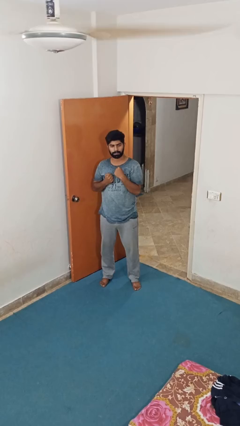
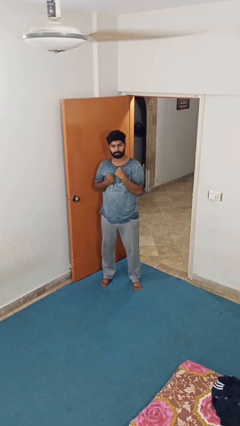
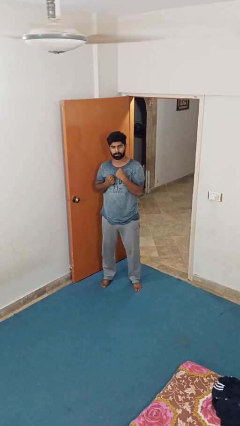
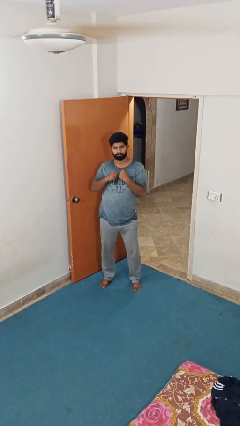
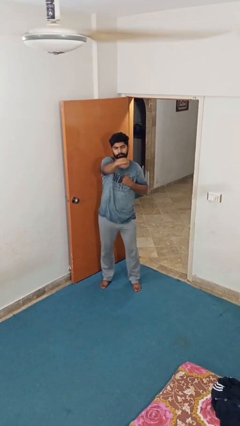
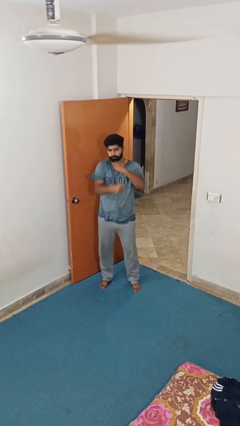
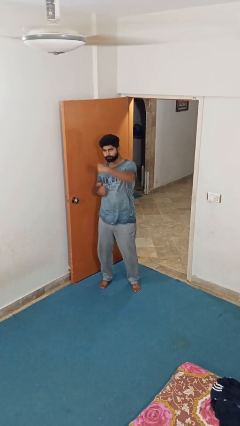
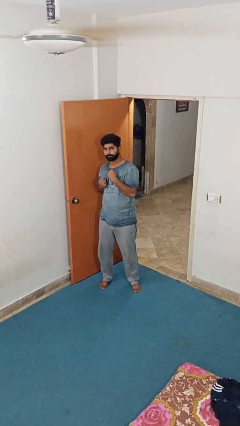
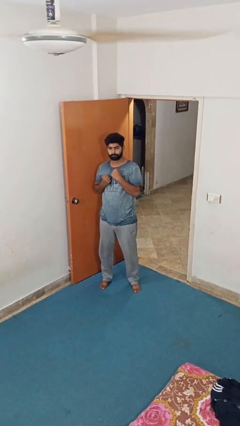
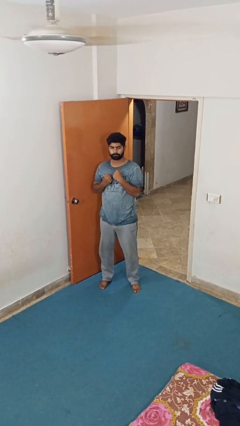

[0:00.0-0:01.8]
person punches

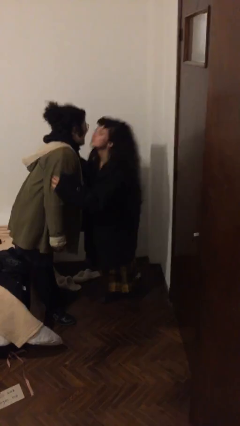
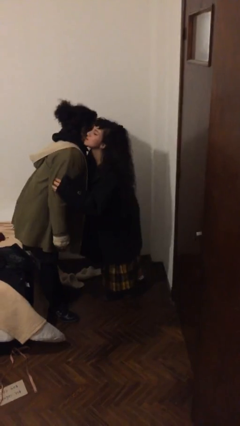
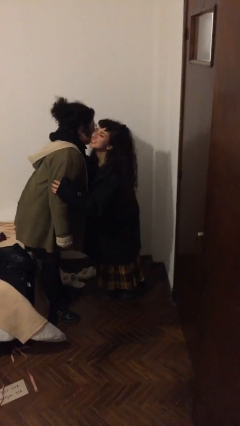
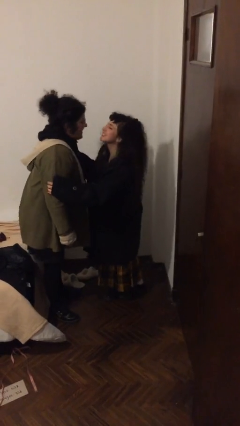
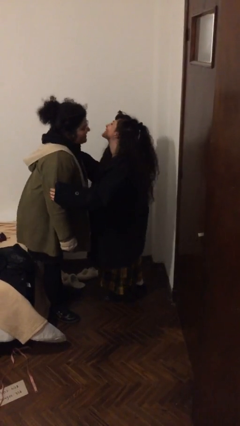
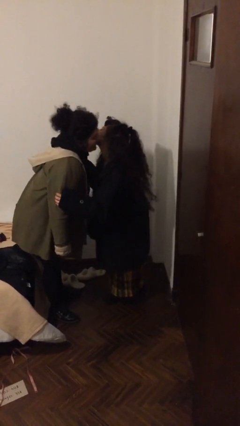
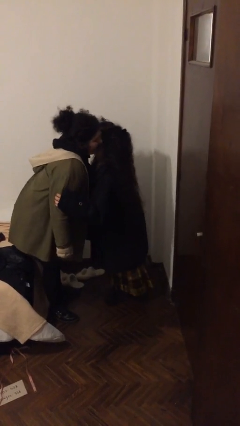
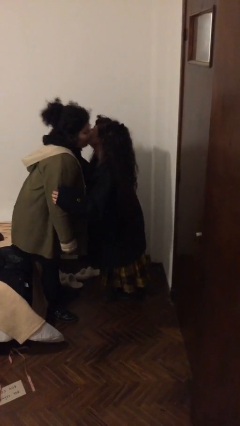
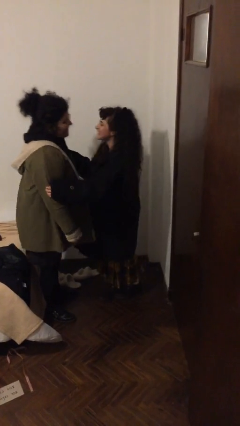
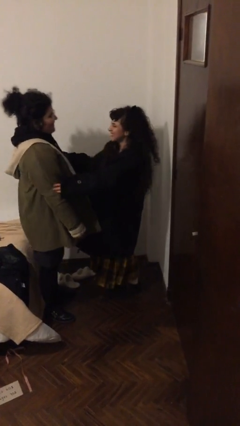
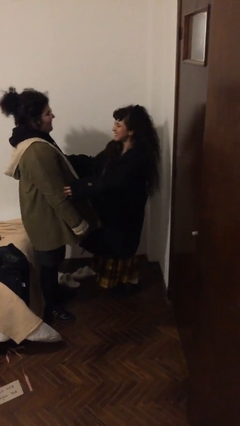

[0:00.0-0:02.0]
person kisses cheek of person

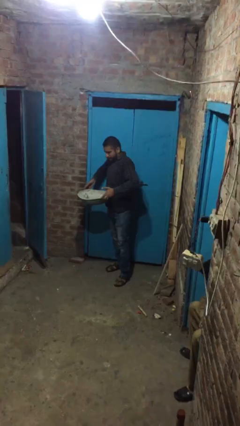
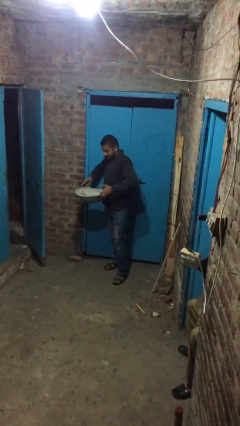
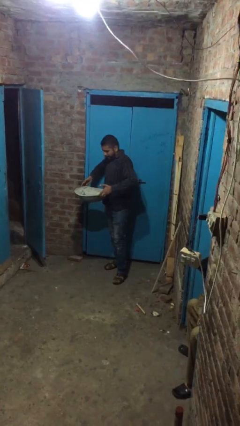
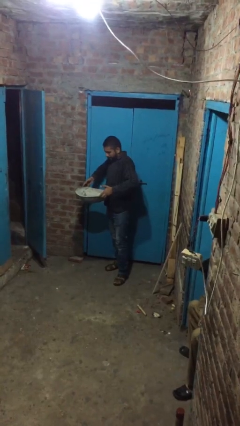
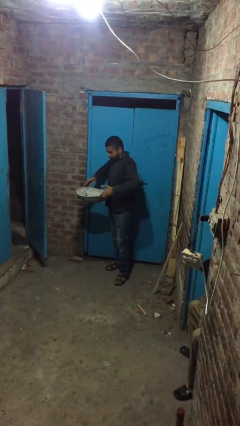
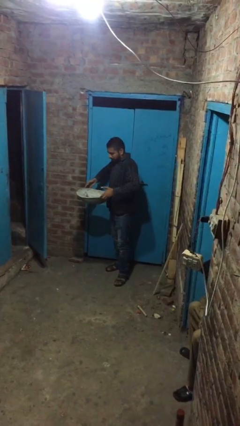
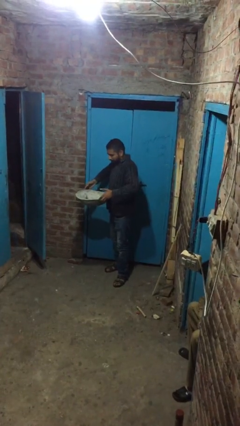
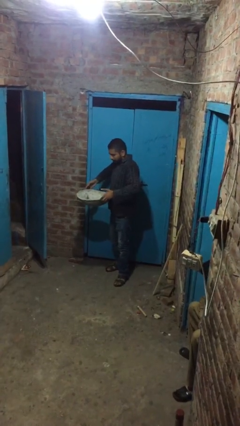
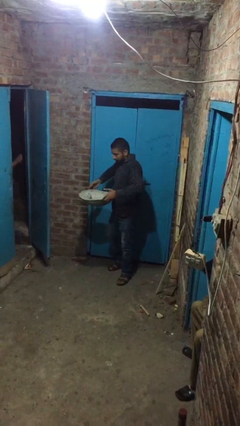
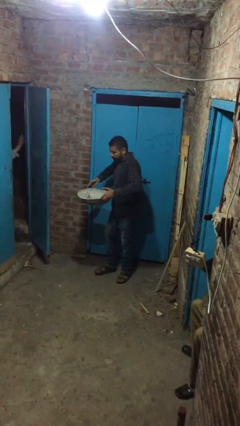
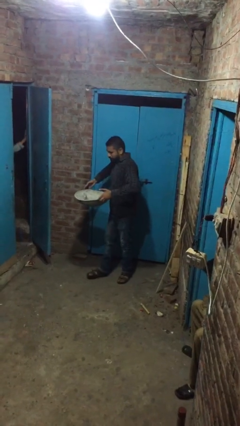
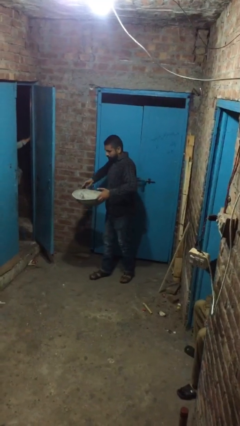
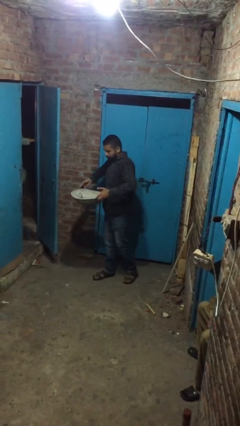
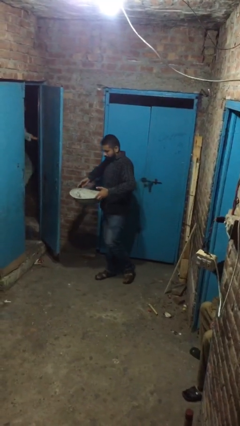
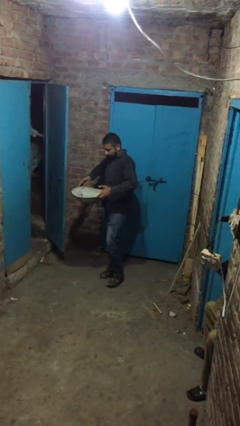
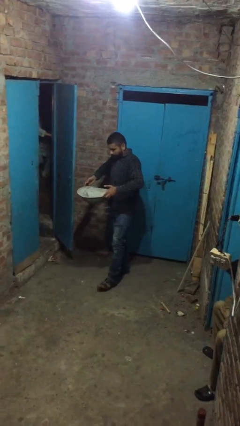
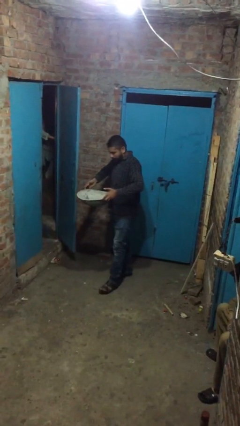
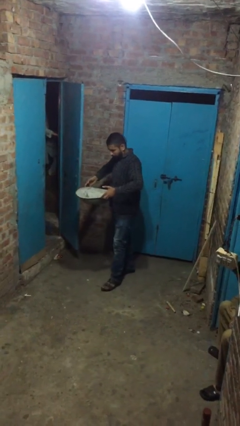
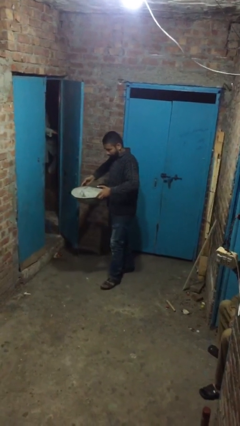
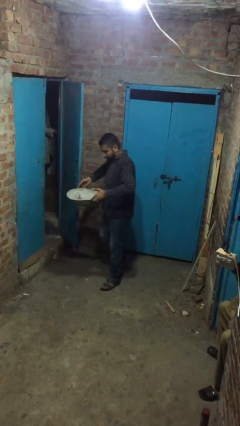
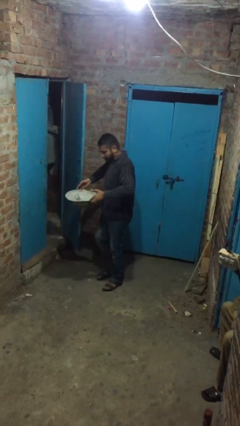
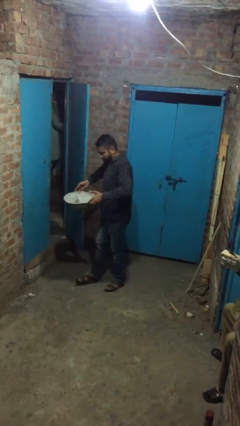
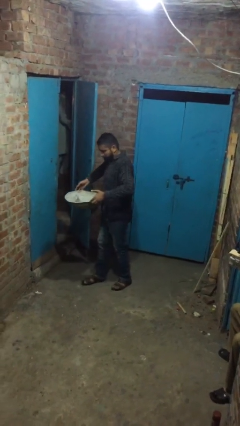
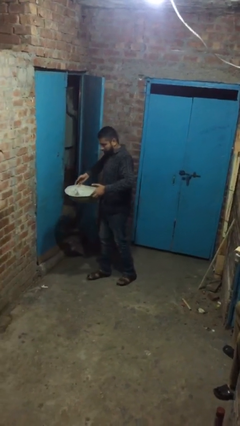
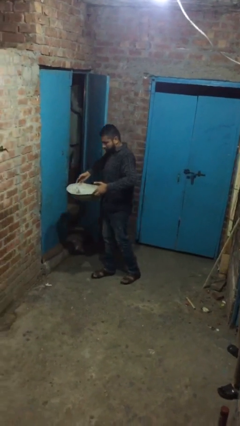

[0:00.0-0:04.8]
person carries heavy object

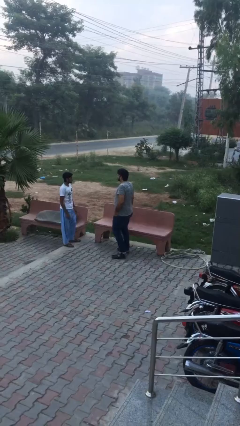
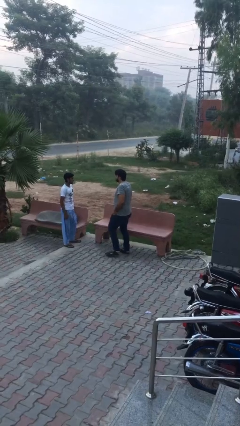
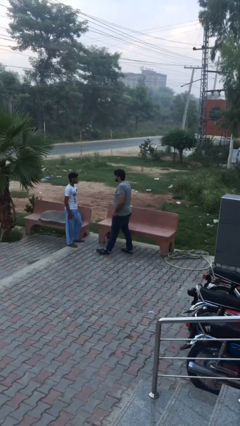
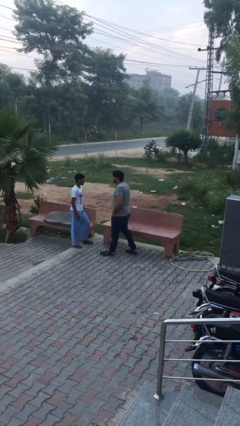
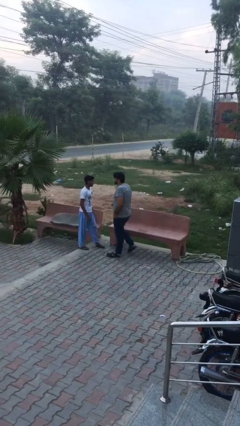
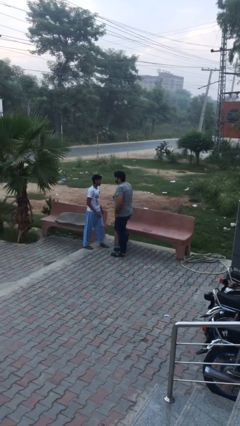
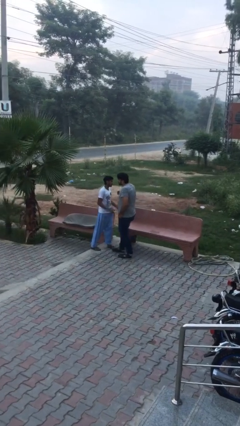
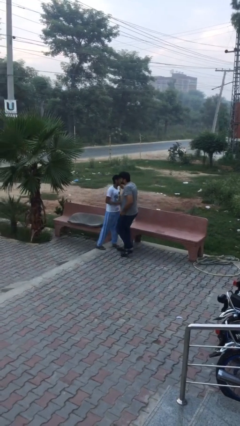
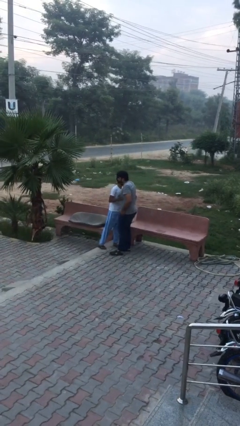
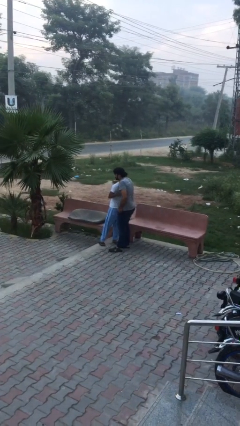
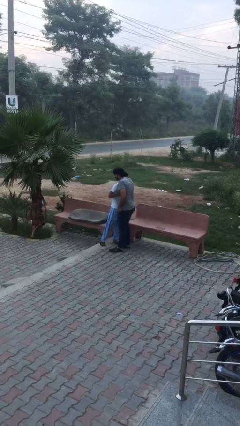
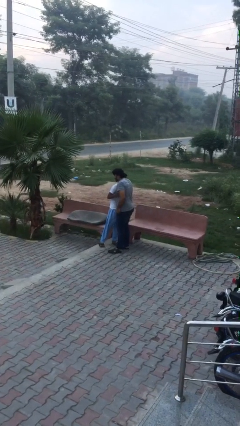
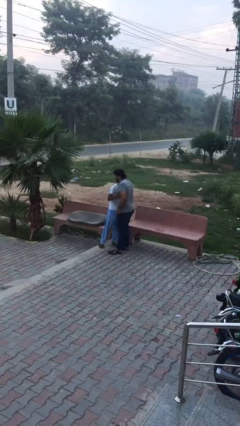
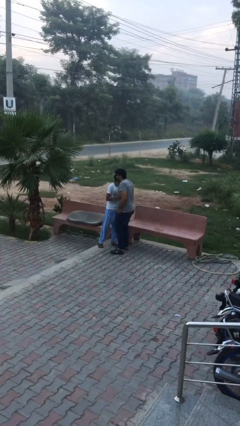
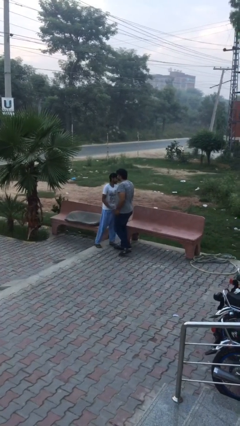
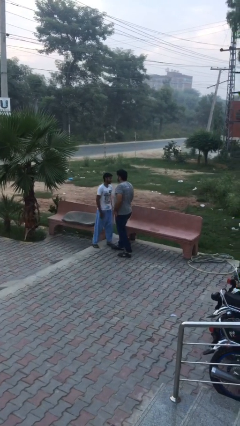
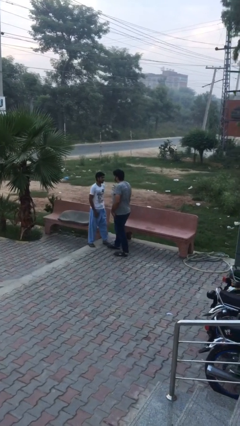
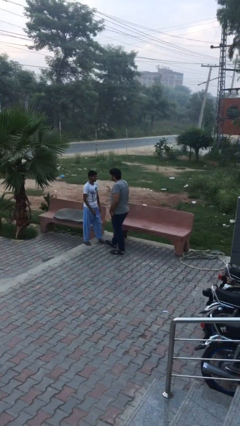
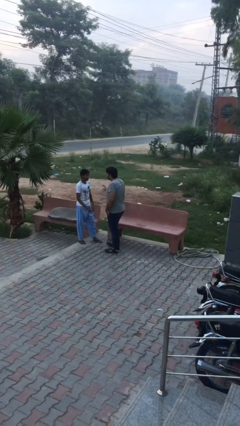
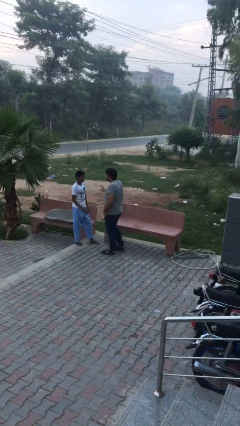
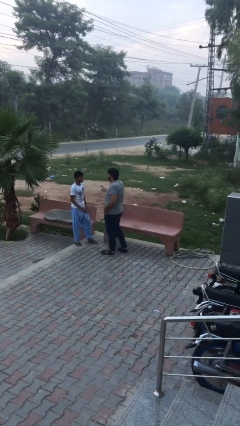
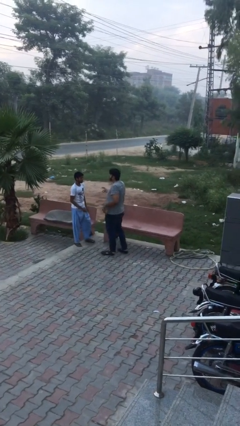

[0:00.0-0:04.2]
person embraces person

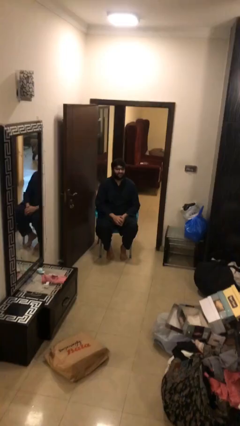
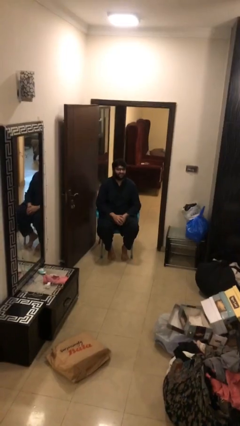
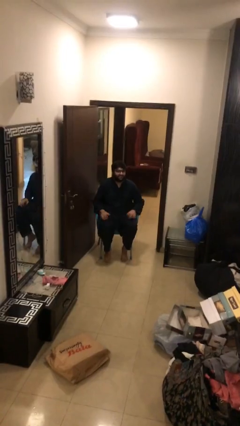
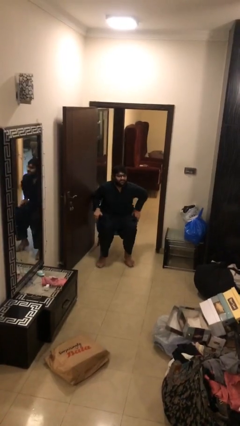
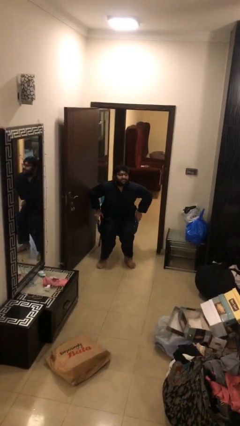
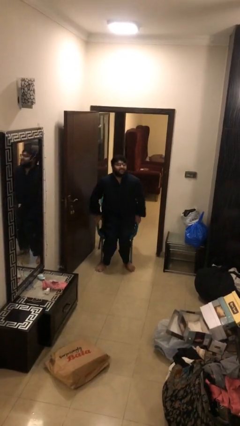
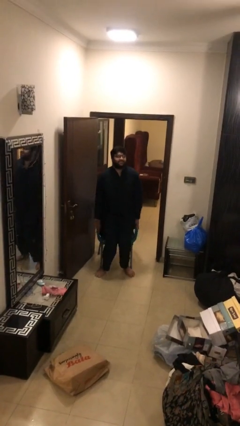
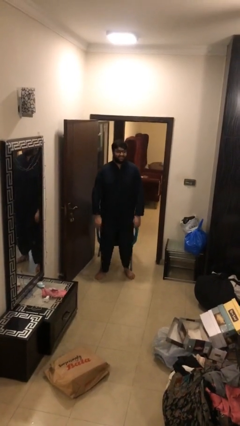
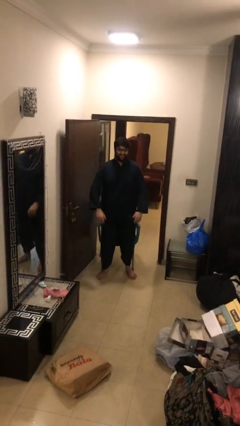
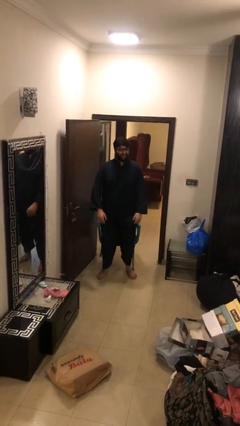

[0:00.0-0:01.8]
person stands up

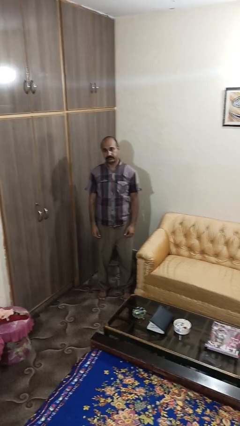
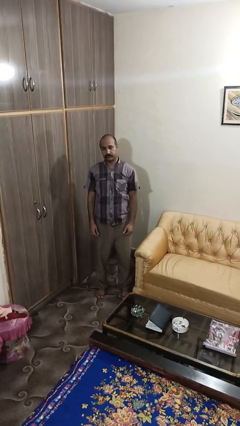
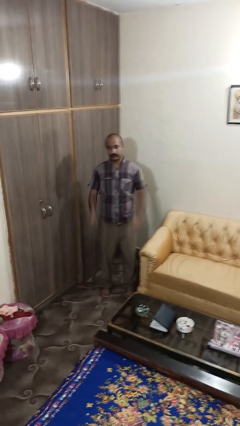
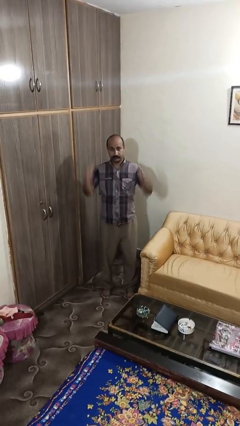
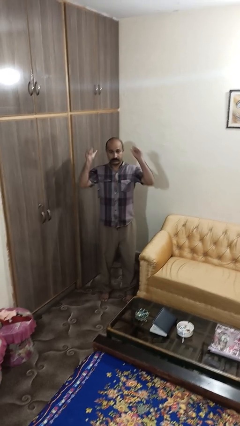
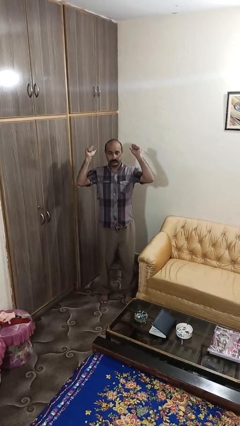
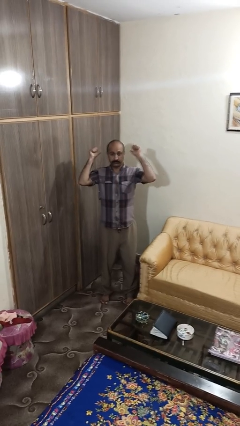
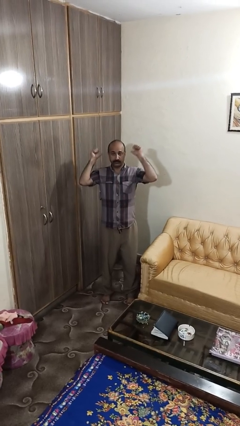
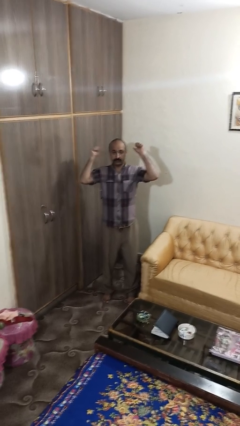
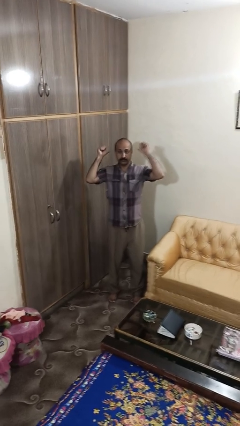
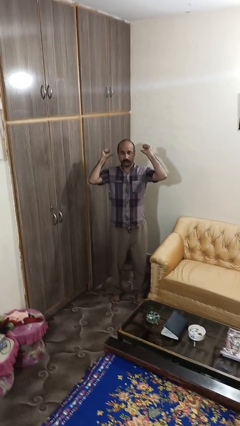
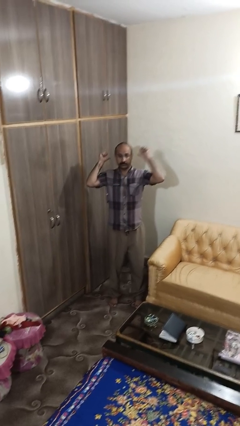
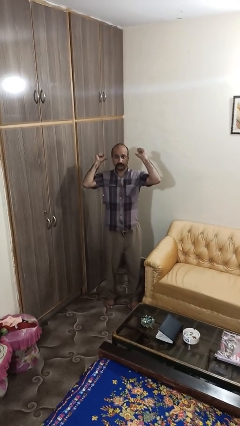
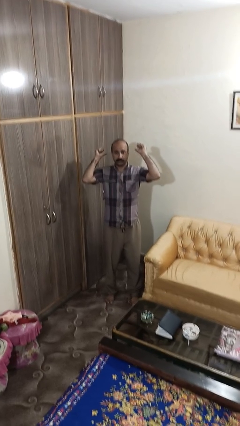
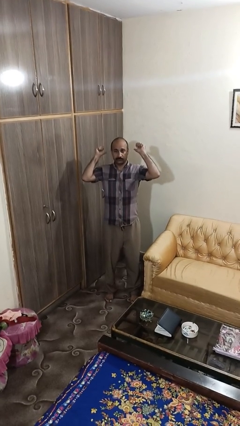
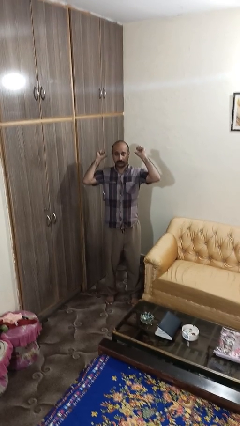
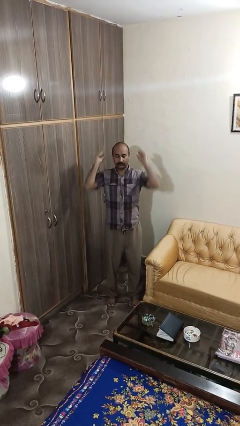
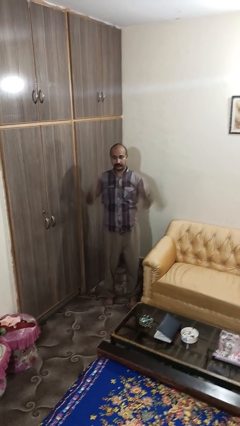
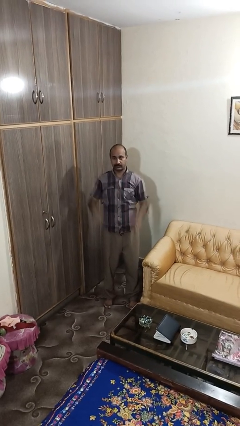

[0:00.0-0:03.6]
person gestures behind me
